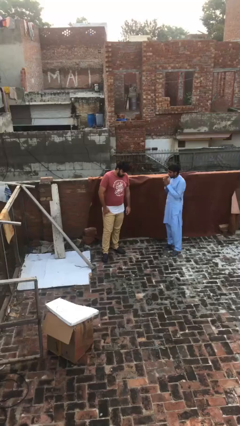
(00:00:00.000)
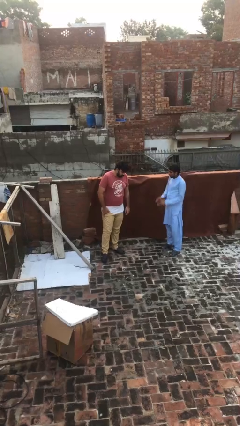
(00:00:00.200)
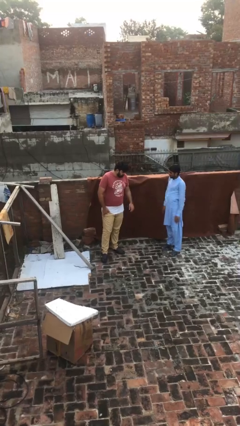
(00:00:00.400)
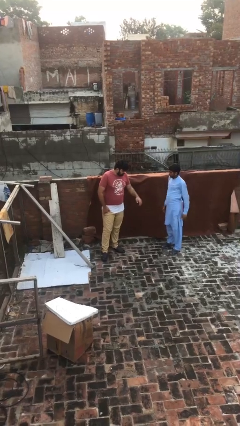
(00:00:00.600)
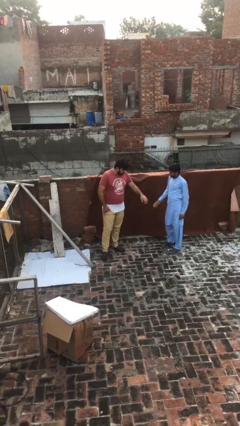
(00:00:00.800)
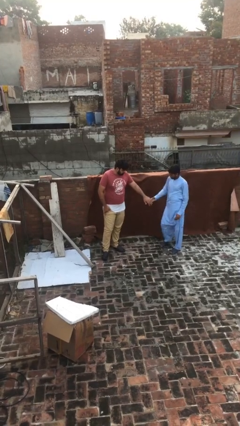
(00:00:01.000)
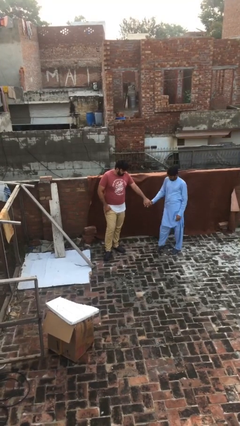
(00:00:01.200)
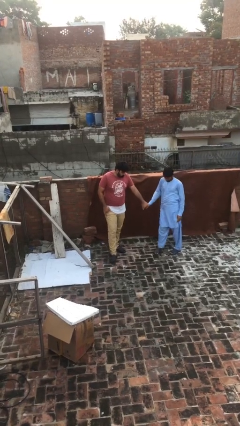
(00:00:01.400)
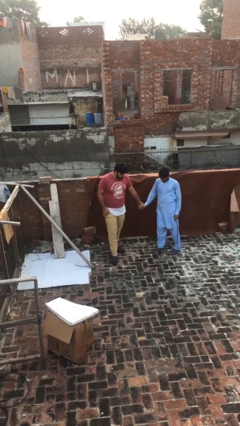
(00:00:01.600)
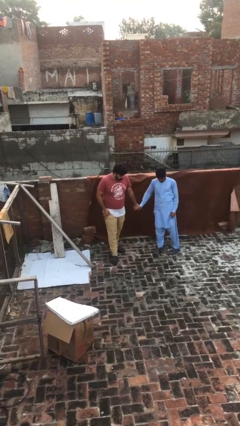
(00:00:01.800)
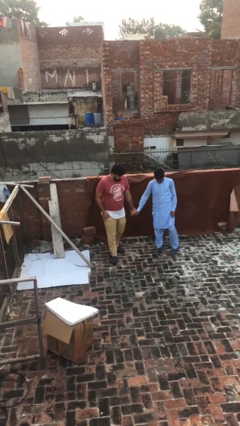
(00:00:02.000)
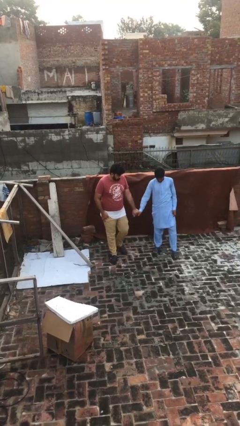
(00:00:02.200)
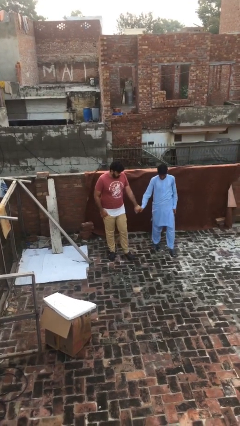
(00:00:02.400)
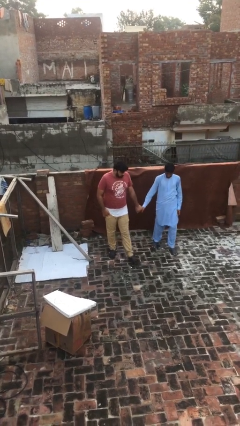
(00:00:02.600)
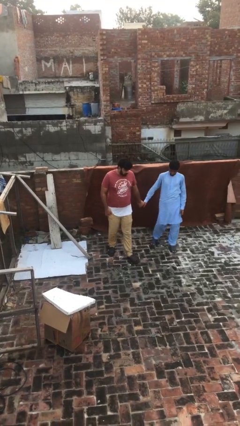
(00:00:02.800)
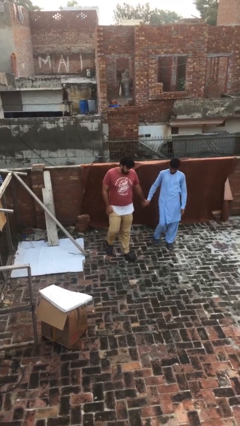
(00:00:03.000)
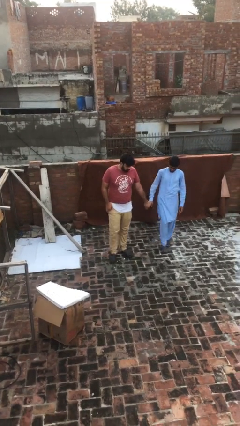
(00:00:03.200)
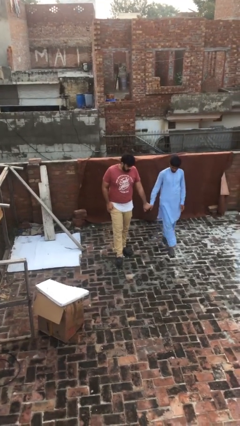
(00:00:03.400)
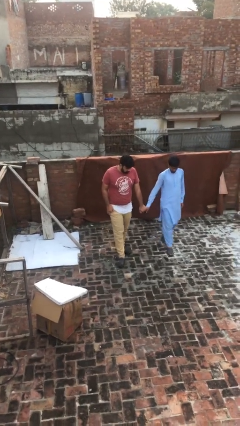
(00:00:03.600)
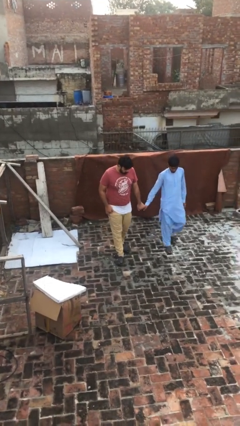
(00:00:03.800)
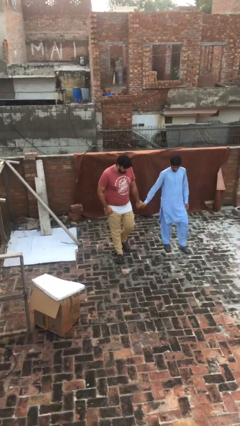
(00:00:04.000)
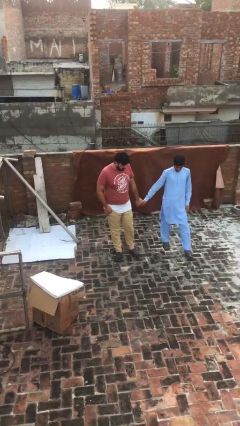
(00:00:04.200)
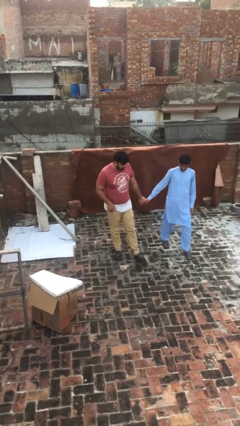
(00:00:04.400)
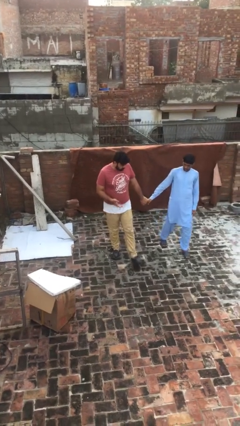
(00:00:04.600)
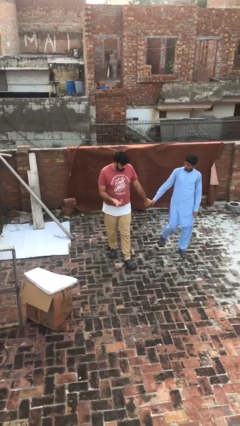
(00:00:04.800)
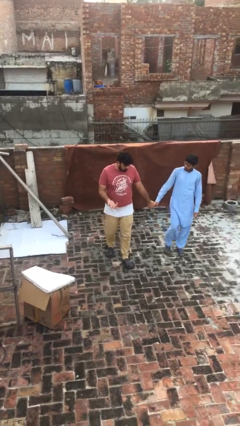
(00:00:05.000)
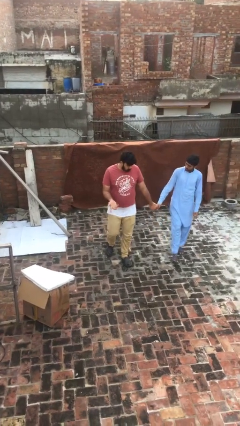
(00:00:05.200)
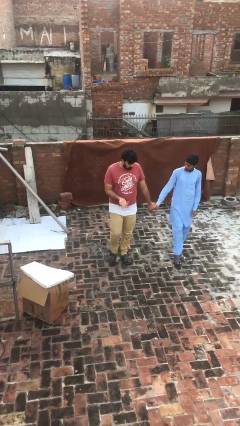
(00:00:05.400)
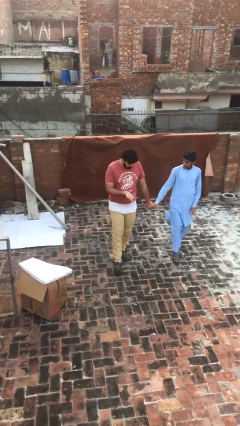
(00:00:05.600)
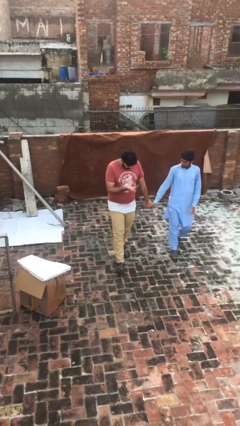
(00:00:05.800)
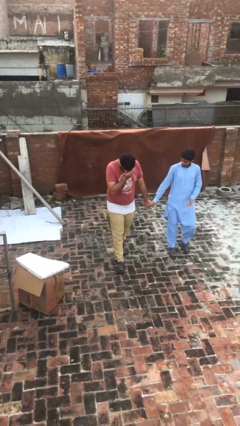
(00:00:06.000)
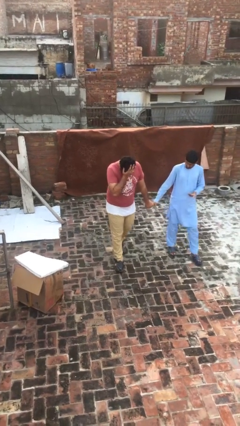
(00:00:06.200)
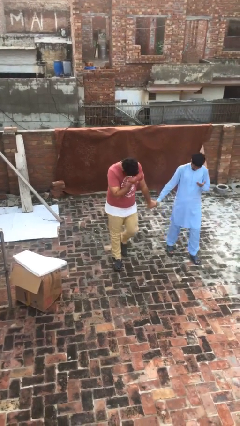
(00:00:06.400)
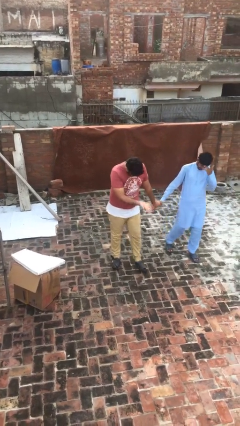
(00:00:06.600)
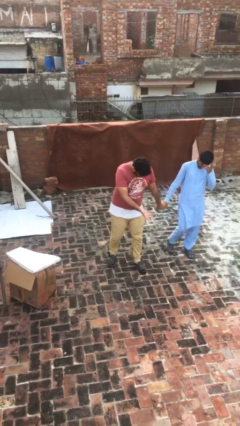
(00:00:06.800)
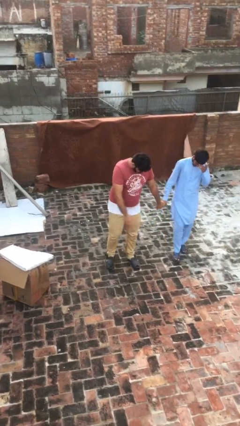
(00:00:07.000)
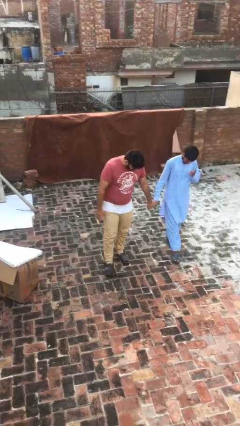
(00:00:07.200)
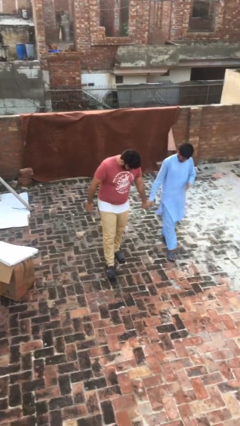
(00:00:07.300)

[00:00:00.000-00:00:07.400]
person holds hand

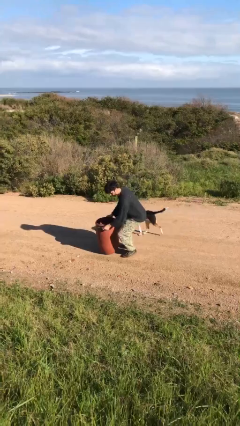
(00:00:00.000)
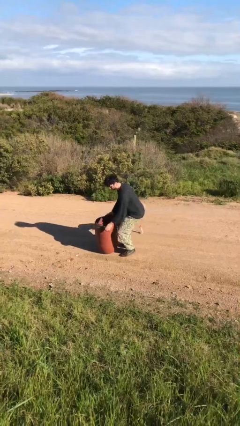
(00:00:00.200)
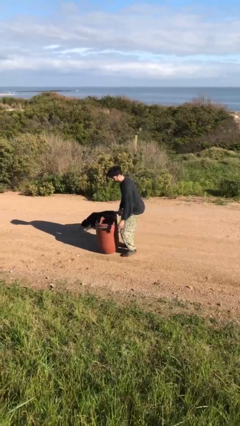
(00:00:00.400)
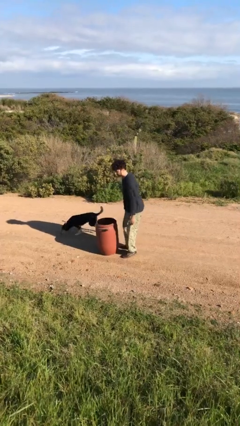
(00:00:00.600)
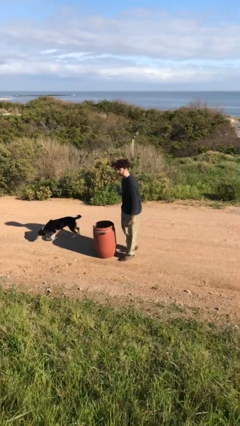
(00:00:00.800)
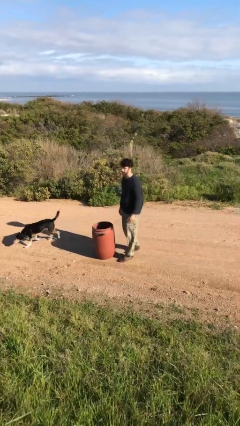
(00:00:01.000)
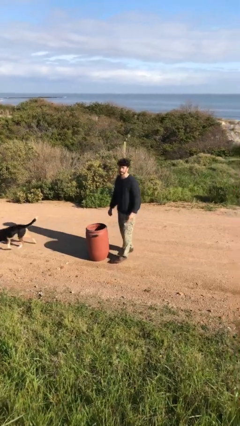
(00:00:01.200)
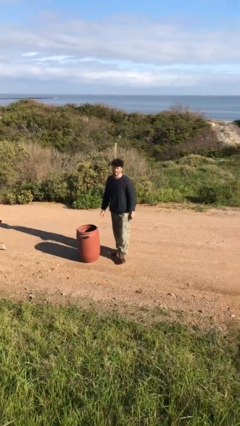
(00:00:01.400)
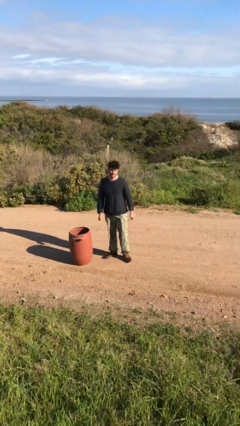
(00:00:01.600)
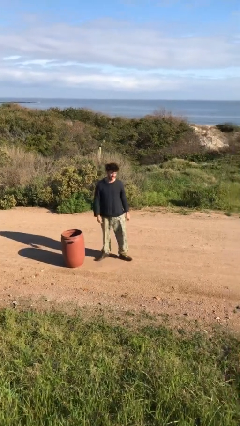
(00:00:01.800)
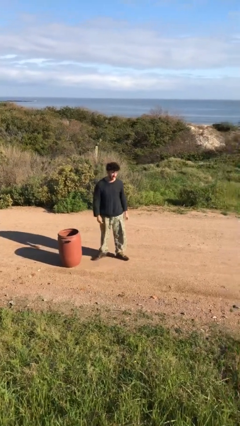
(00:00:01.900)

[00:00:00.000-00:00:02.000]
person puts down object on floor

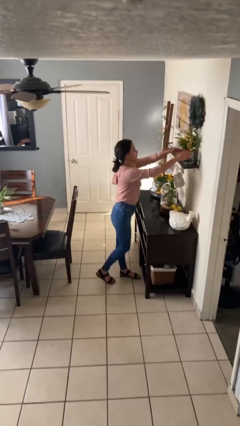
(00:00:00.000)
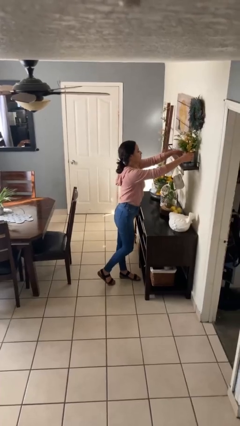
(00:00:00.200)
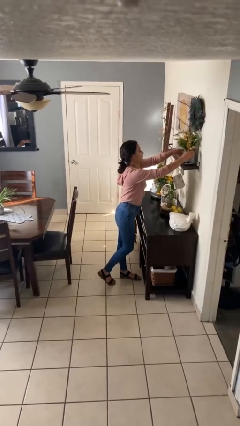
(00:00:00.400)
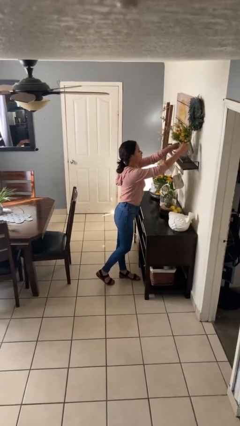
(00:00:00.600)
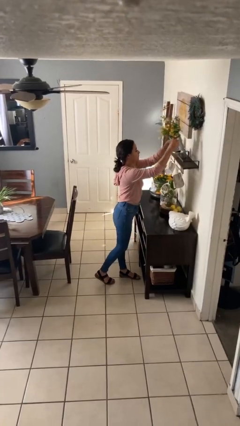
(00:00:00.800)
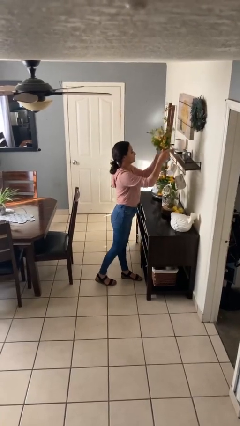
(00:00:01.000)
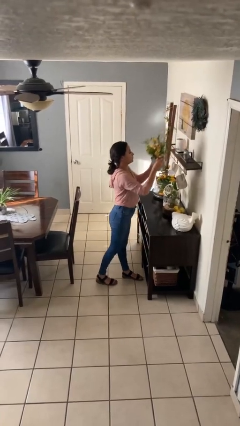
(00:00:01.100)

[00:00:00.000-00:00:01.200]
person picks up object from countertop

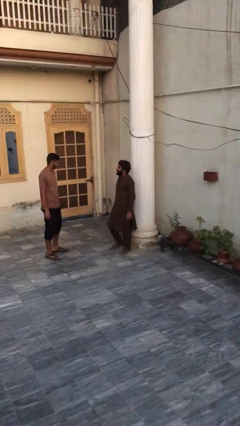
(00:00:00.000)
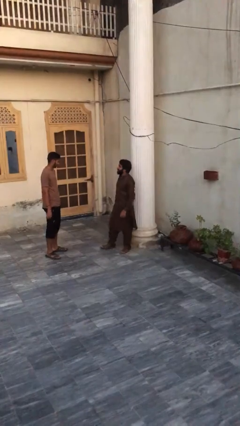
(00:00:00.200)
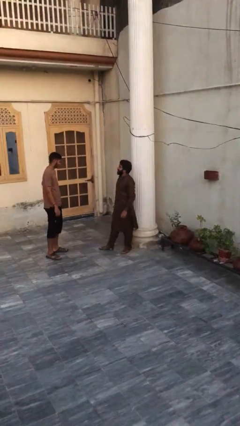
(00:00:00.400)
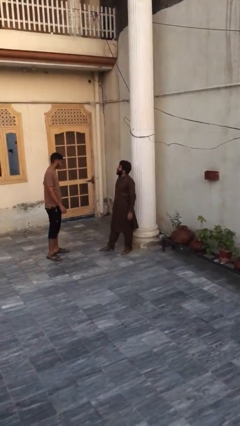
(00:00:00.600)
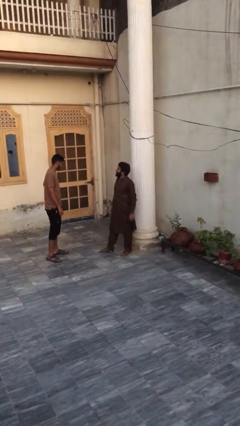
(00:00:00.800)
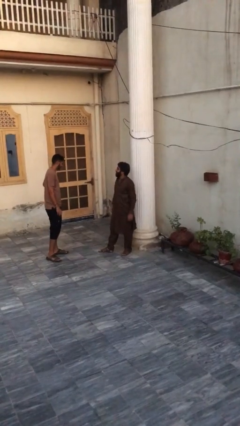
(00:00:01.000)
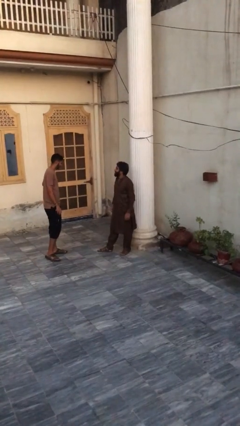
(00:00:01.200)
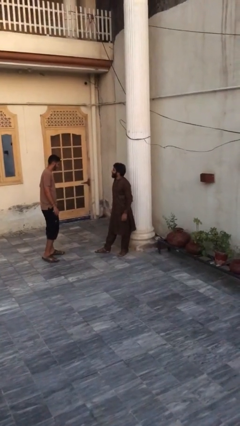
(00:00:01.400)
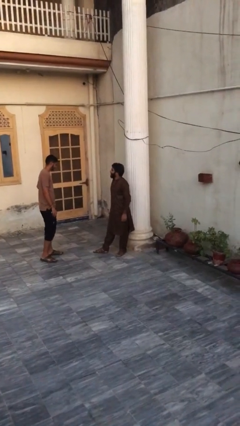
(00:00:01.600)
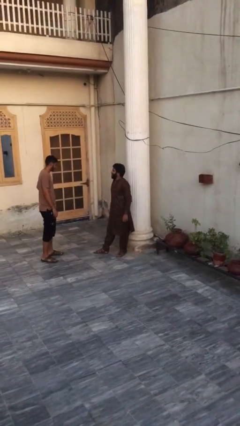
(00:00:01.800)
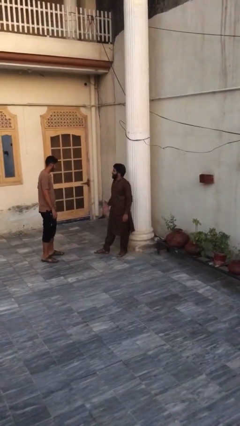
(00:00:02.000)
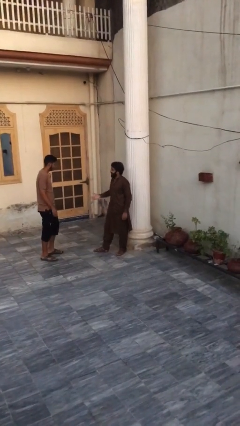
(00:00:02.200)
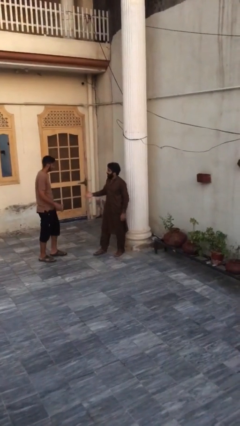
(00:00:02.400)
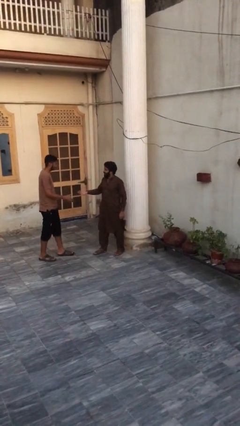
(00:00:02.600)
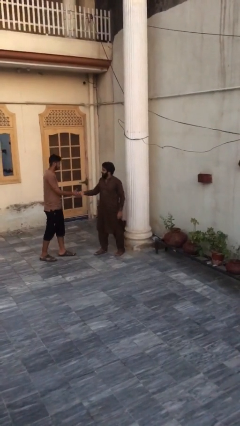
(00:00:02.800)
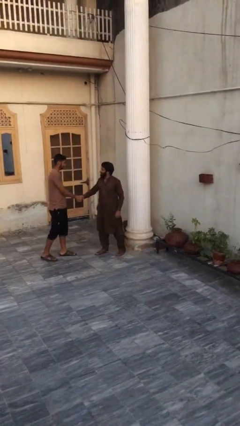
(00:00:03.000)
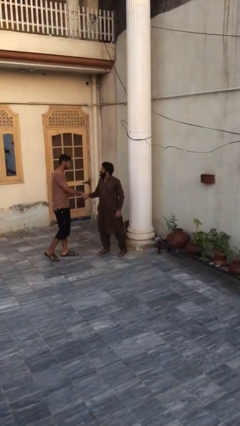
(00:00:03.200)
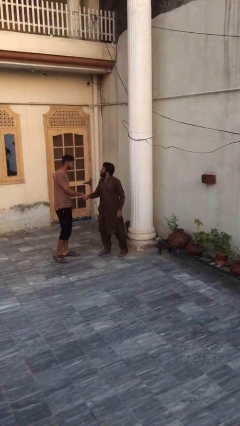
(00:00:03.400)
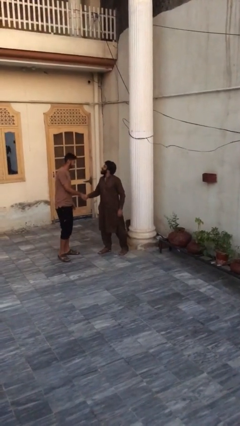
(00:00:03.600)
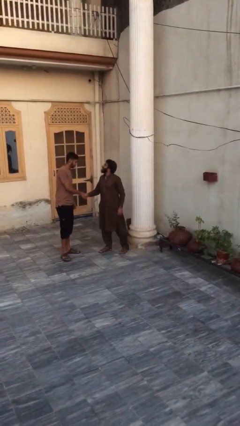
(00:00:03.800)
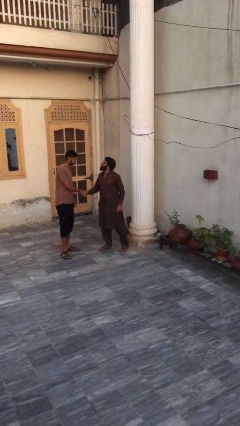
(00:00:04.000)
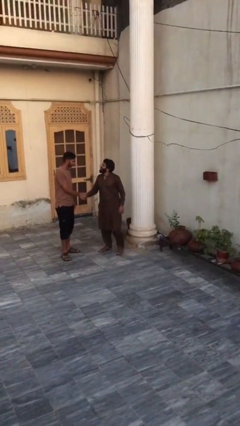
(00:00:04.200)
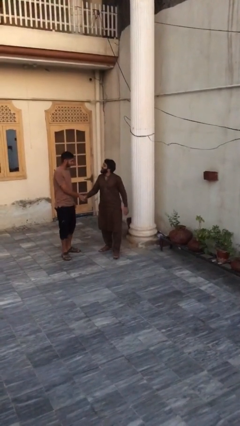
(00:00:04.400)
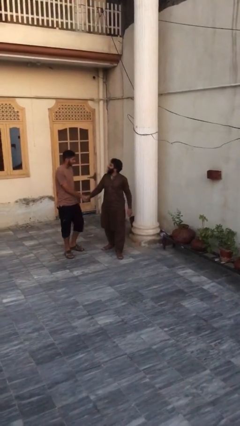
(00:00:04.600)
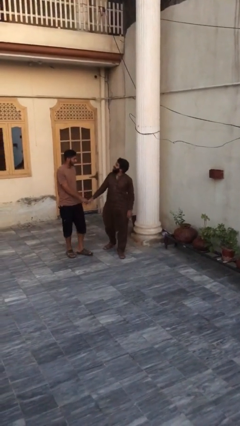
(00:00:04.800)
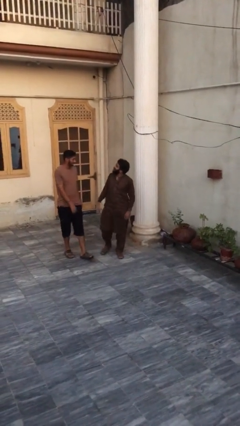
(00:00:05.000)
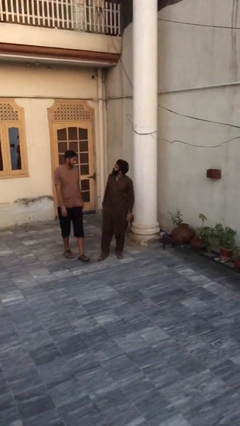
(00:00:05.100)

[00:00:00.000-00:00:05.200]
person shakes hand

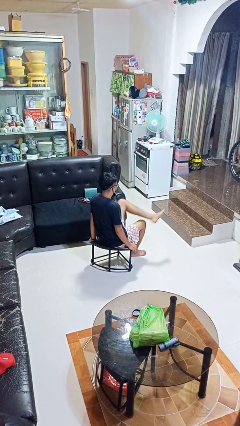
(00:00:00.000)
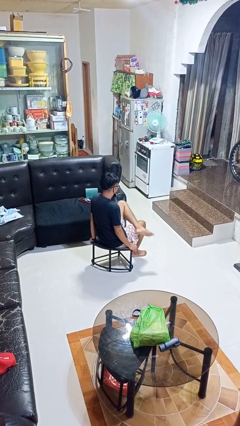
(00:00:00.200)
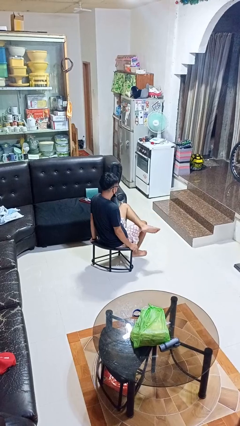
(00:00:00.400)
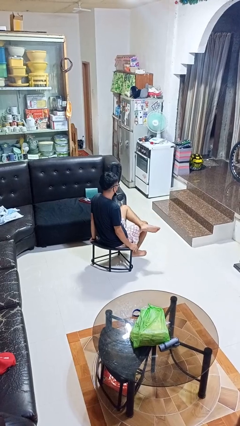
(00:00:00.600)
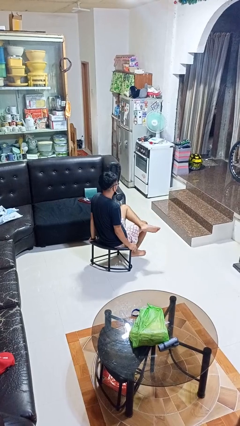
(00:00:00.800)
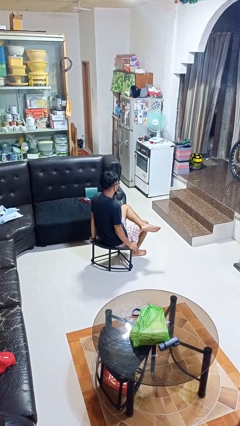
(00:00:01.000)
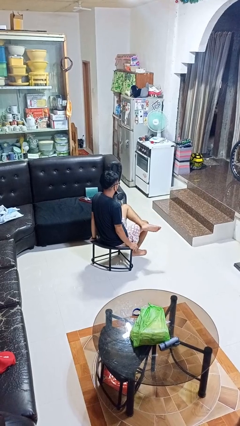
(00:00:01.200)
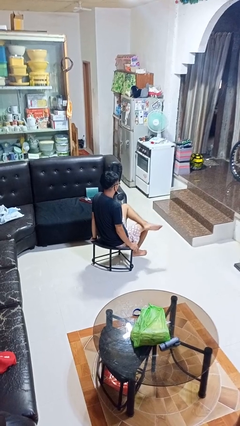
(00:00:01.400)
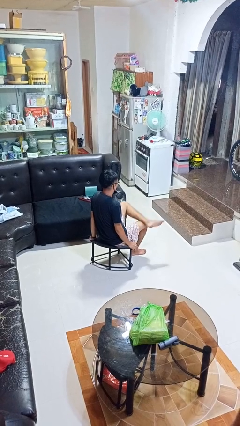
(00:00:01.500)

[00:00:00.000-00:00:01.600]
person crosses legs
